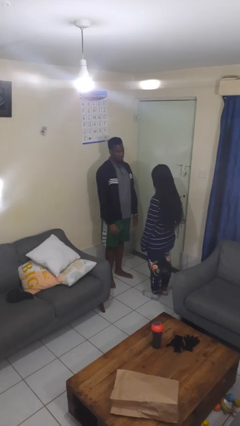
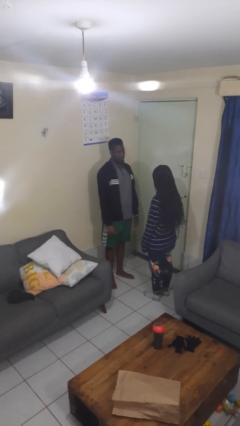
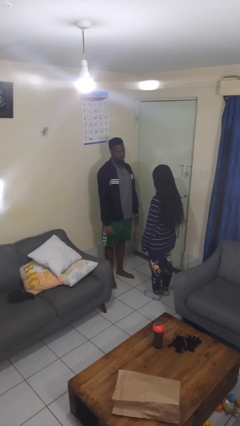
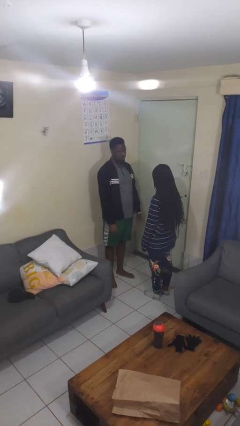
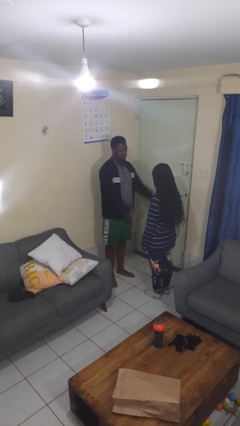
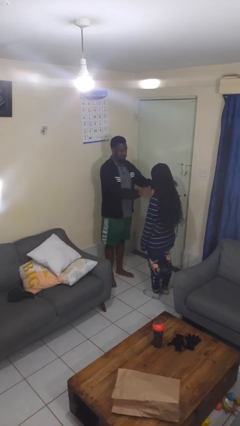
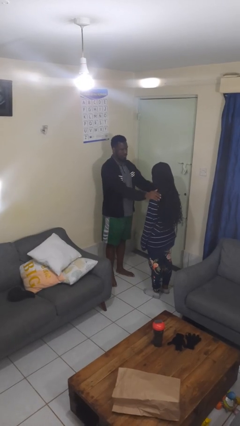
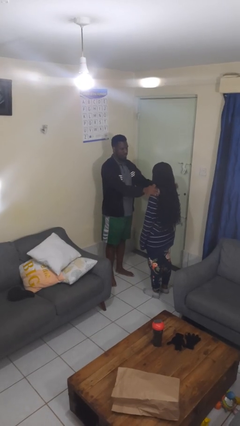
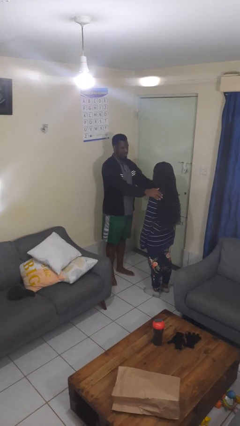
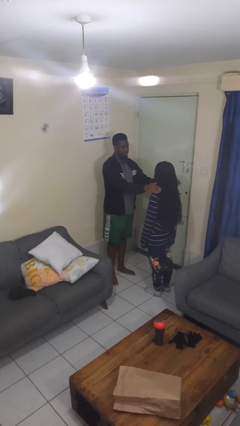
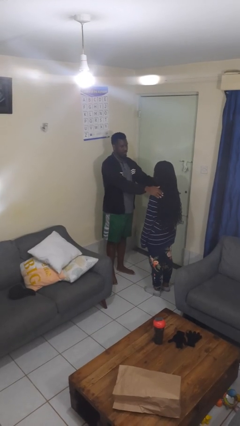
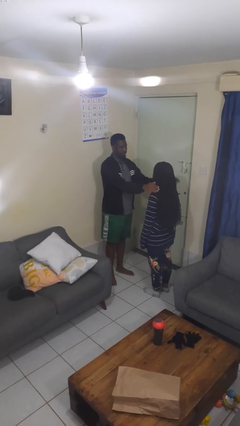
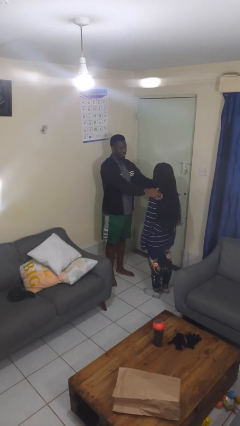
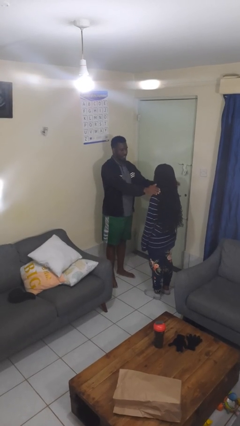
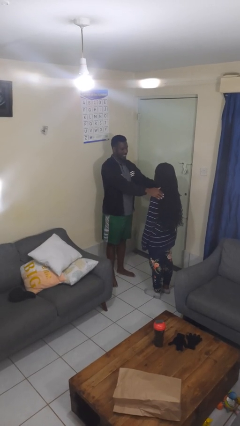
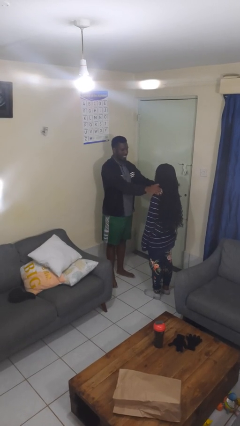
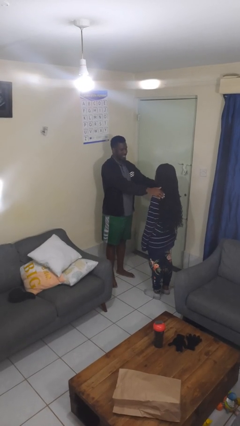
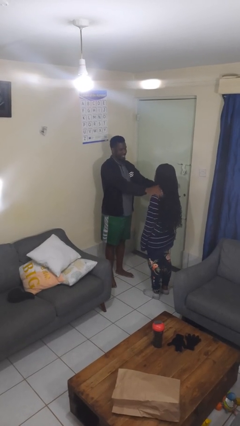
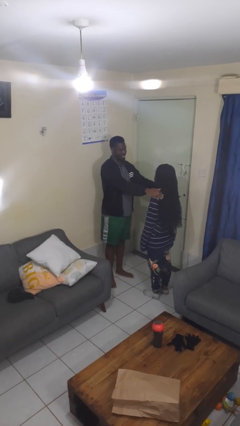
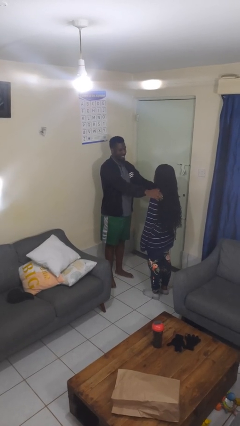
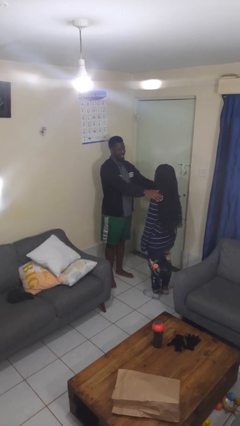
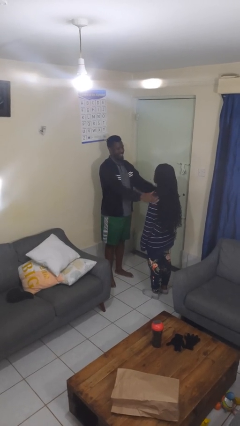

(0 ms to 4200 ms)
person pounds shoulders of person

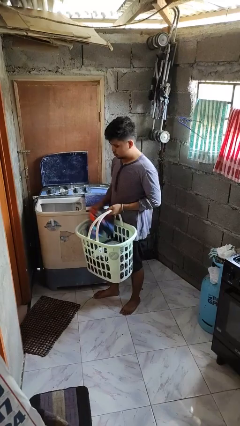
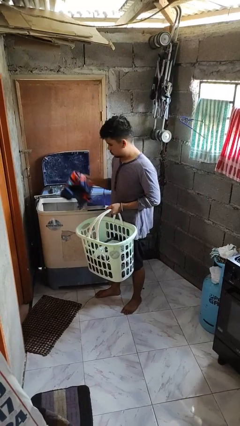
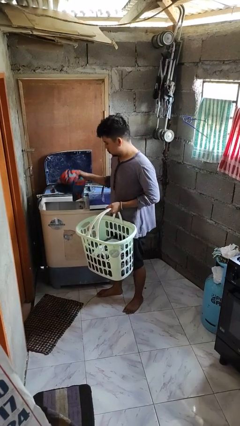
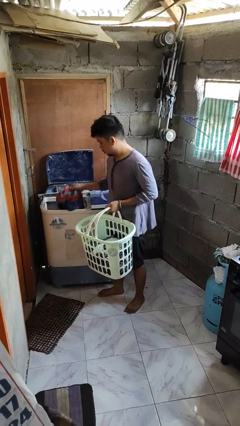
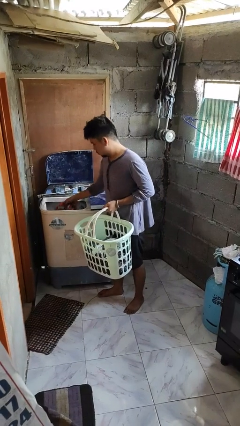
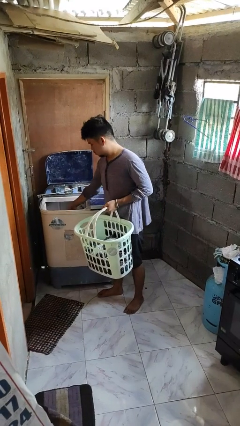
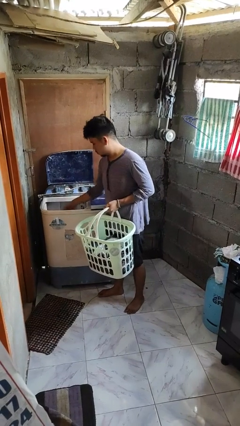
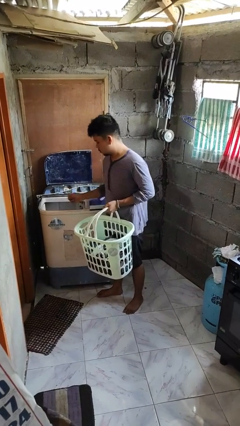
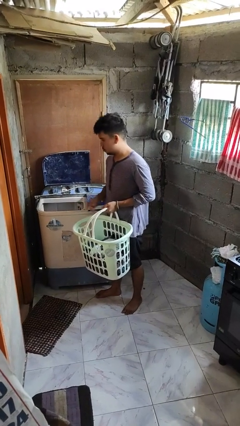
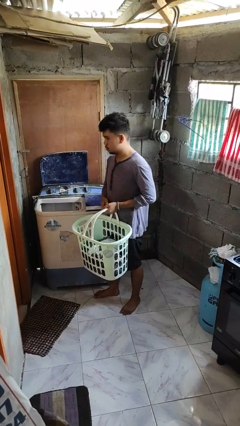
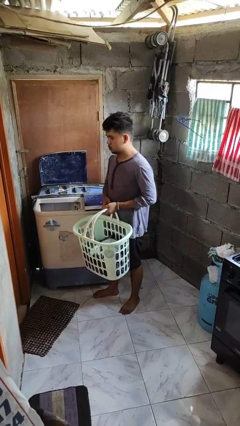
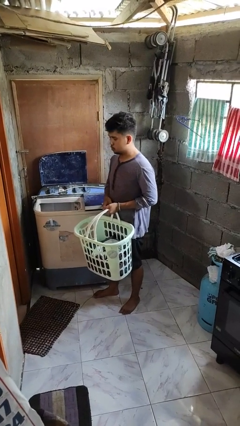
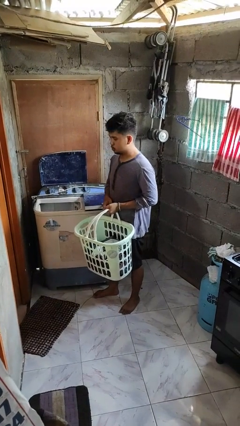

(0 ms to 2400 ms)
person loads clotheswasher

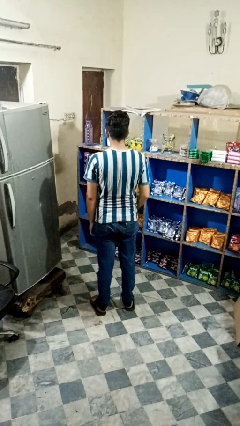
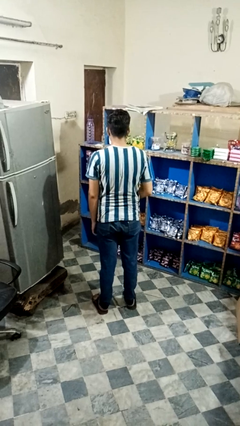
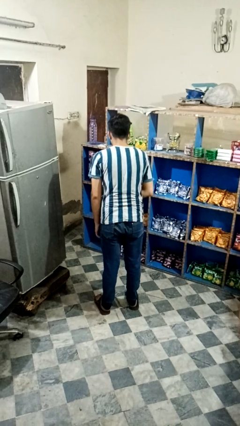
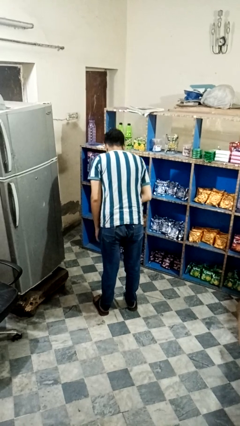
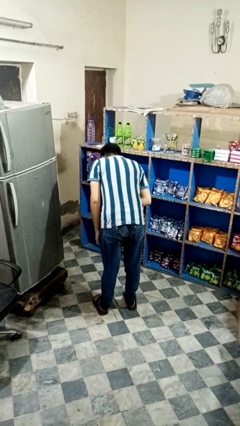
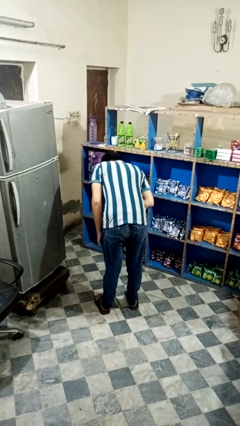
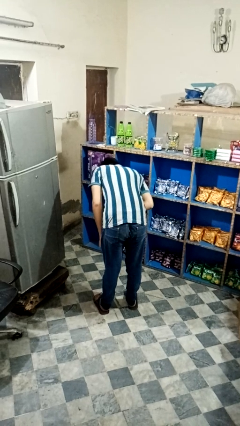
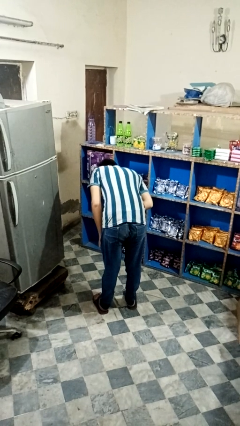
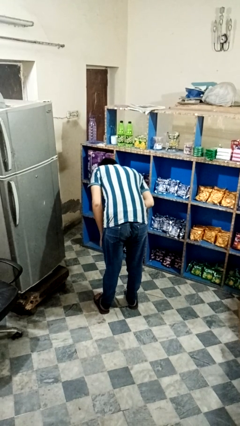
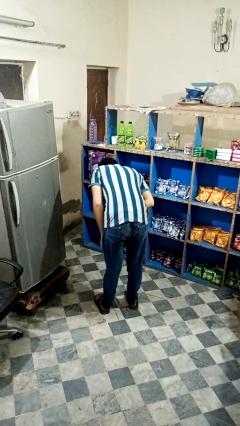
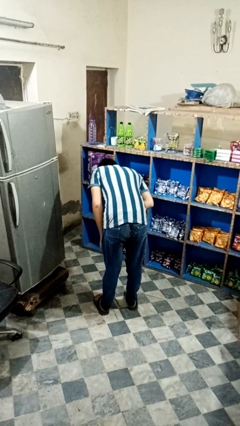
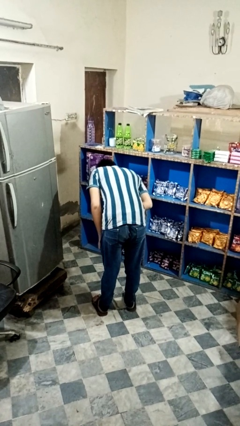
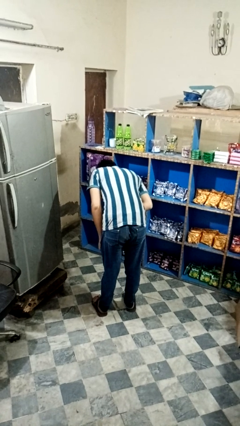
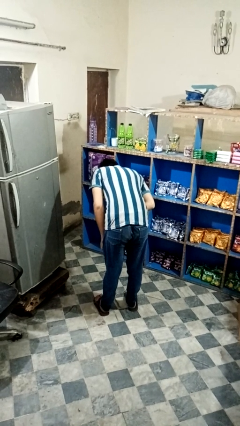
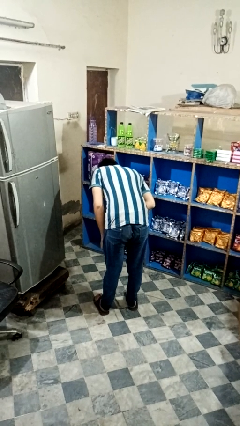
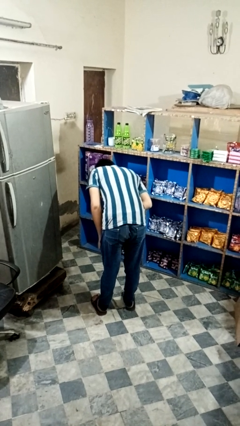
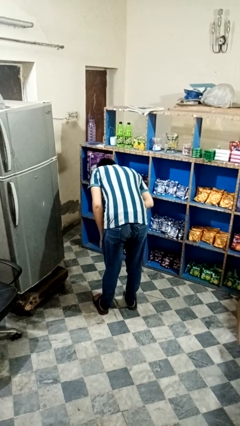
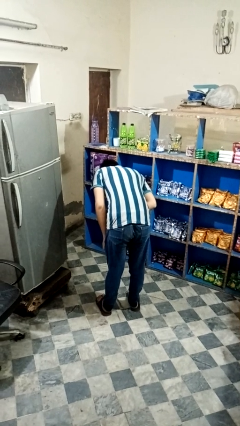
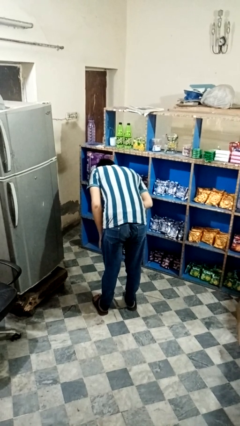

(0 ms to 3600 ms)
person bows

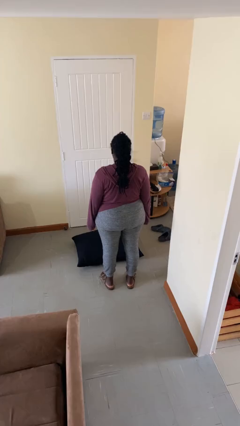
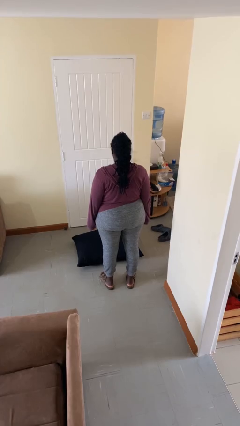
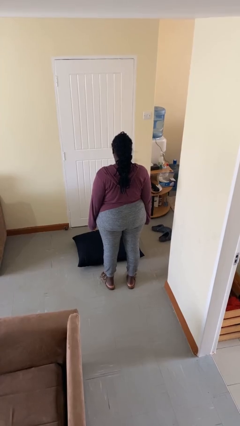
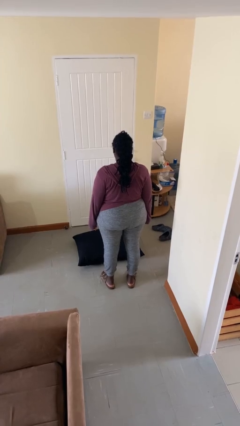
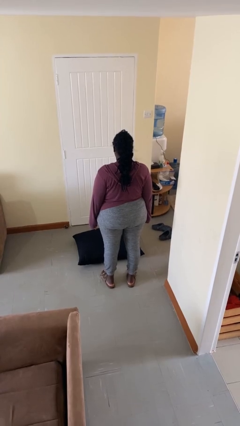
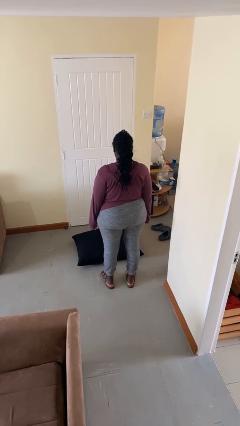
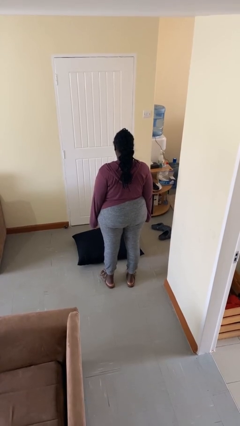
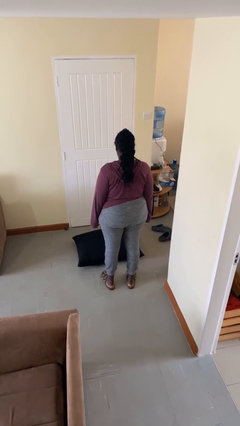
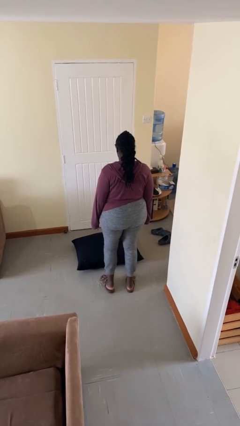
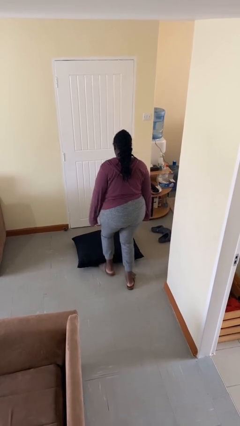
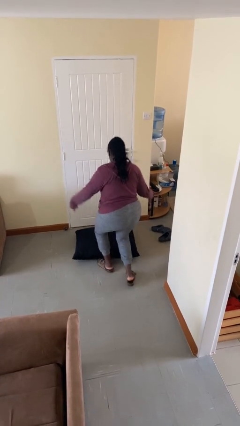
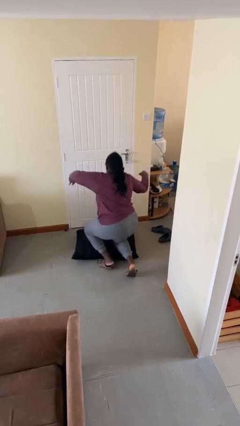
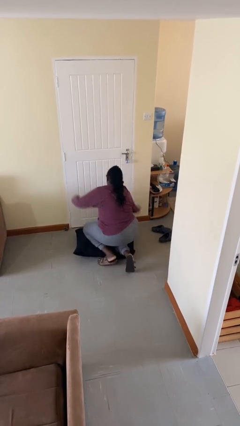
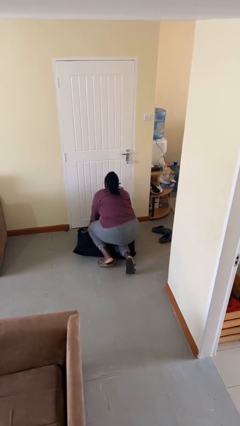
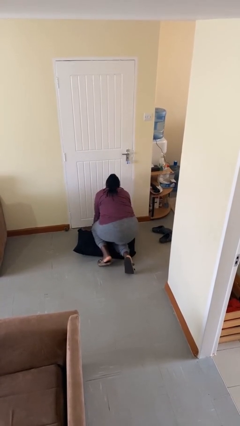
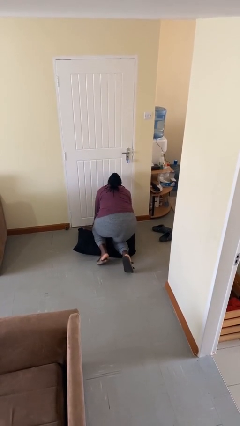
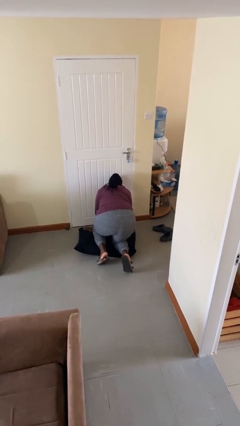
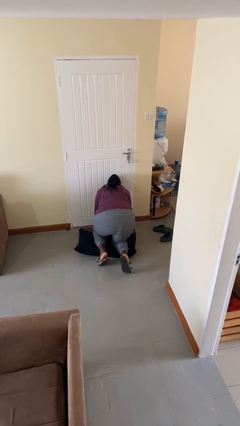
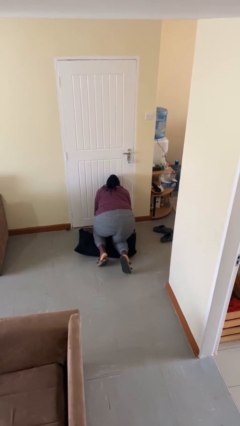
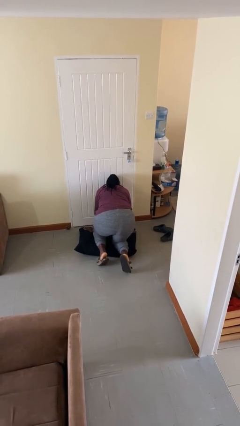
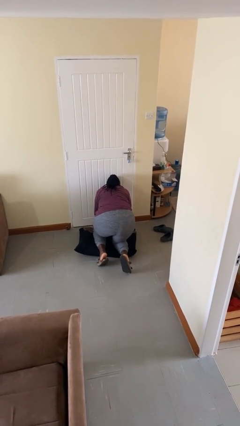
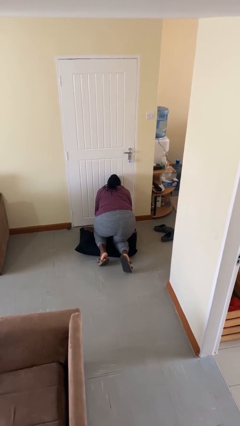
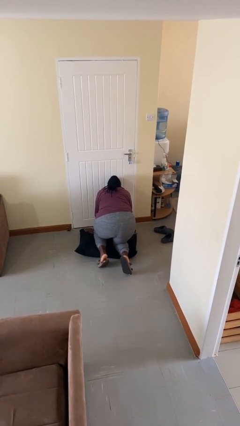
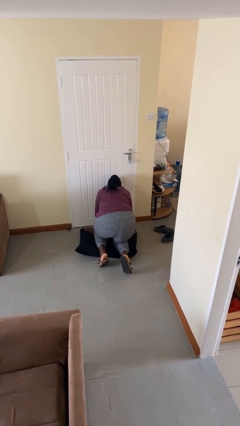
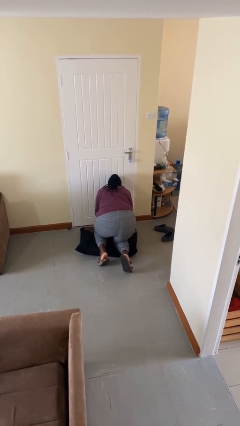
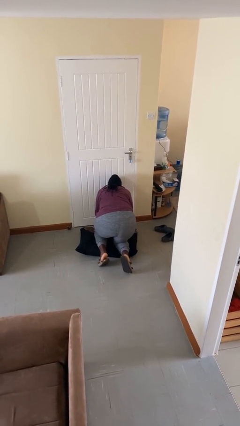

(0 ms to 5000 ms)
person trips on object on floor

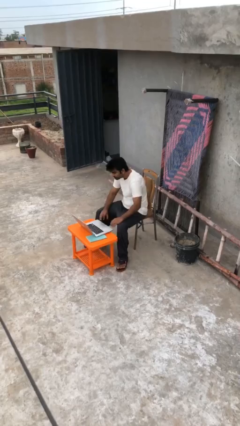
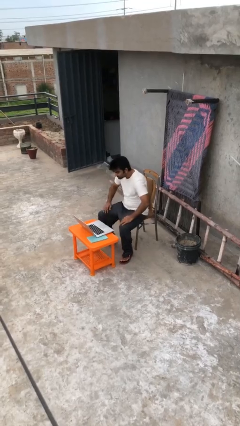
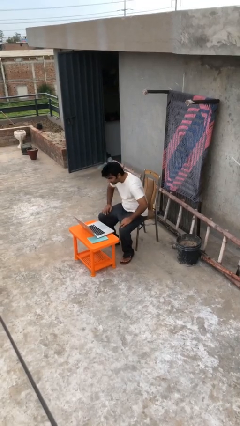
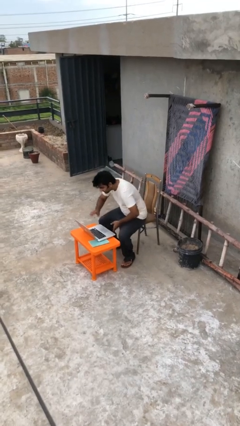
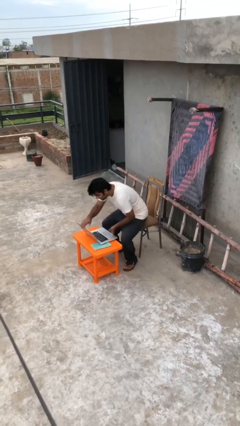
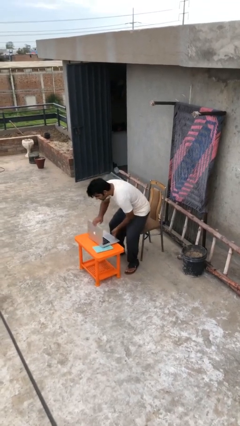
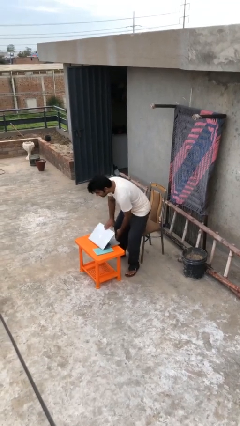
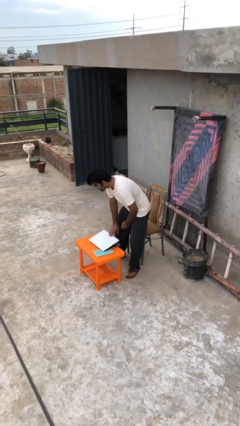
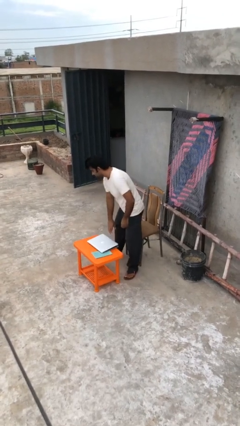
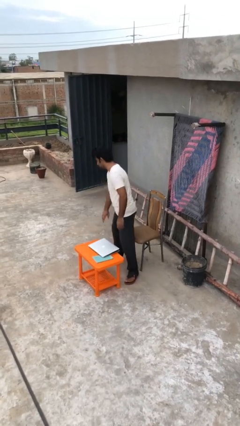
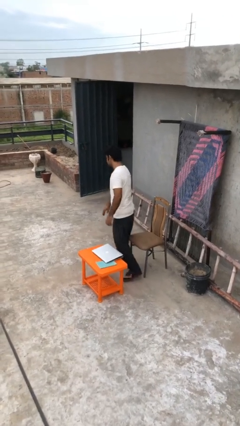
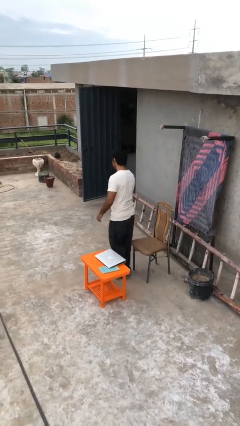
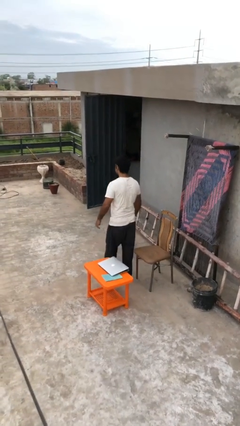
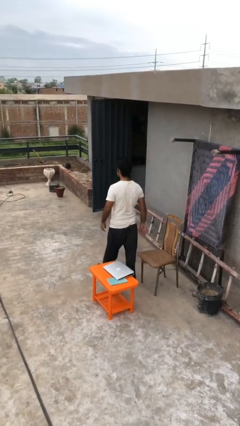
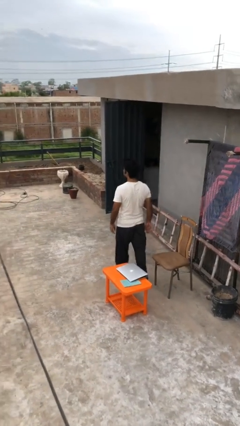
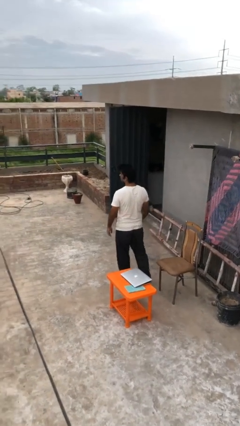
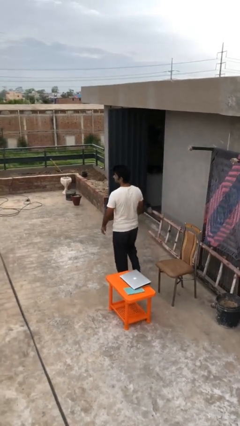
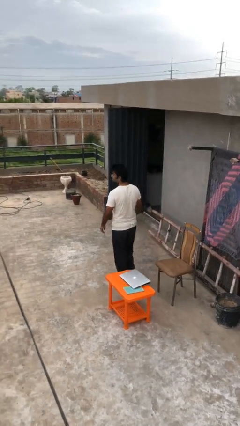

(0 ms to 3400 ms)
person stands up
